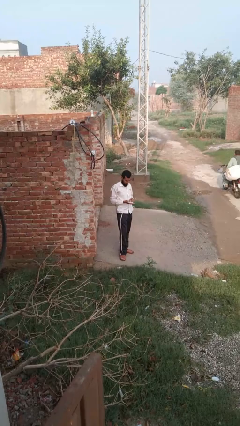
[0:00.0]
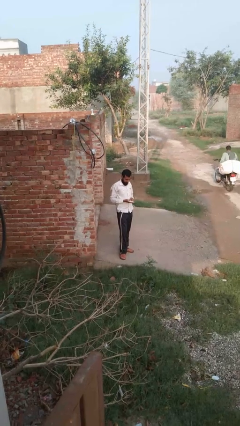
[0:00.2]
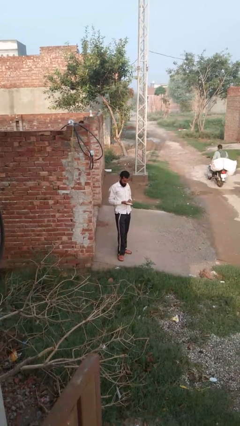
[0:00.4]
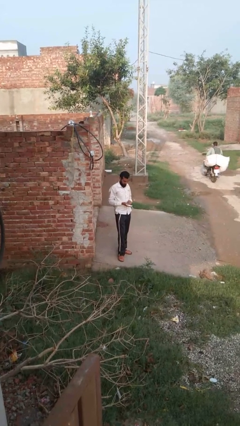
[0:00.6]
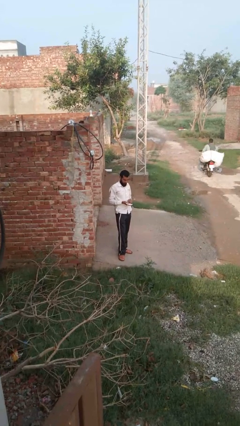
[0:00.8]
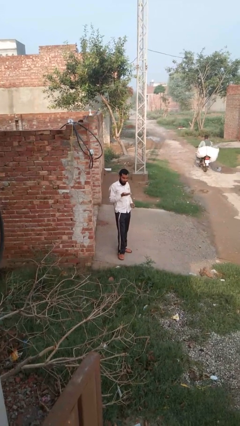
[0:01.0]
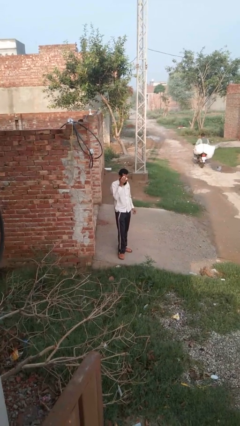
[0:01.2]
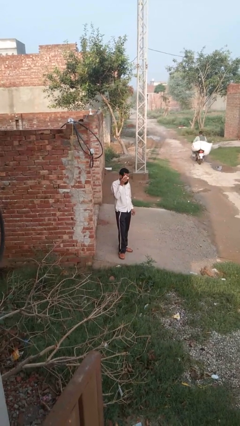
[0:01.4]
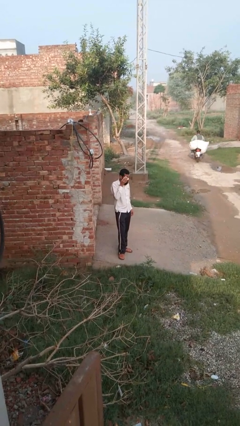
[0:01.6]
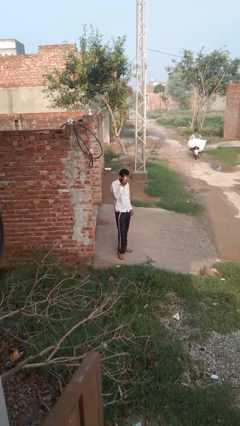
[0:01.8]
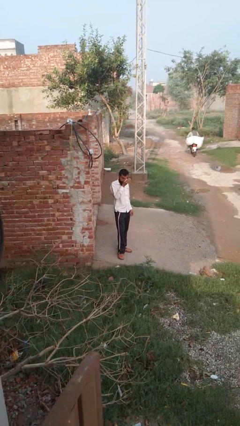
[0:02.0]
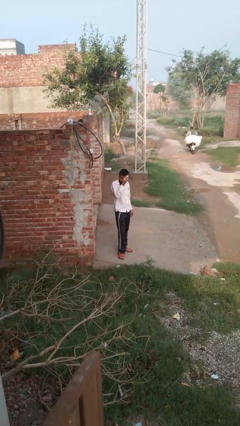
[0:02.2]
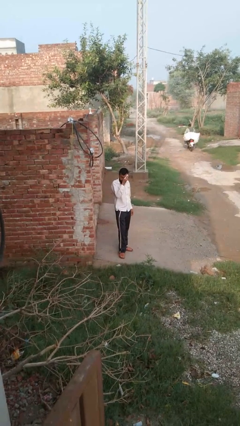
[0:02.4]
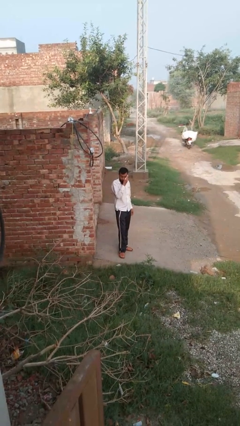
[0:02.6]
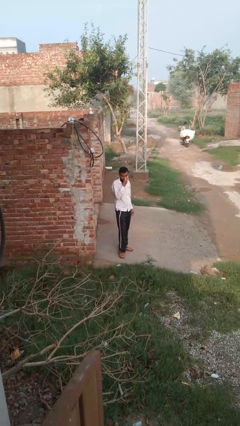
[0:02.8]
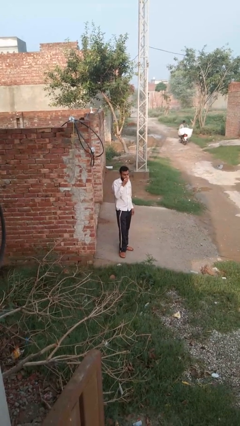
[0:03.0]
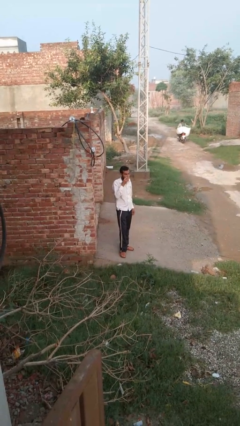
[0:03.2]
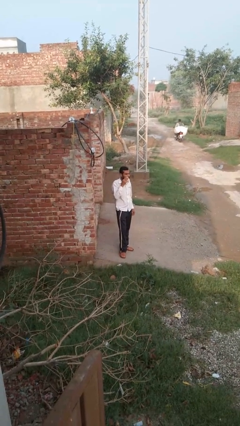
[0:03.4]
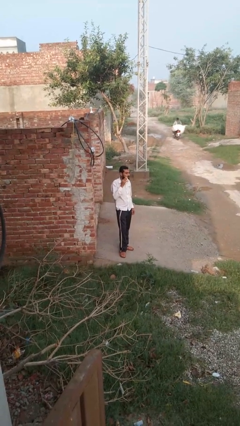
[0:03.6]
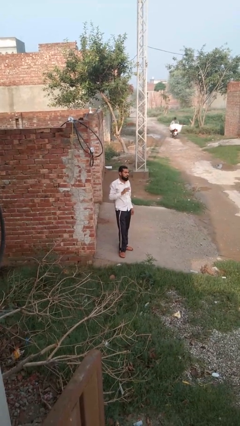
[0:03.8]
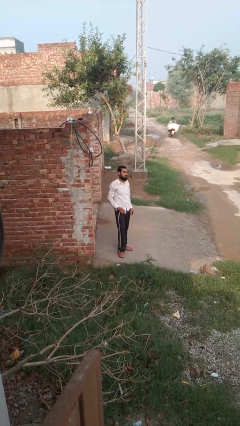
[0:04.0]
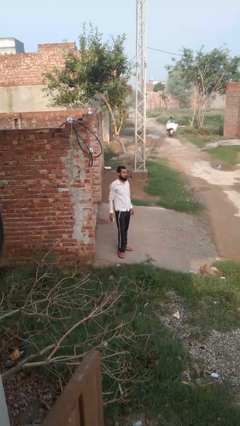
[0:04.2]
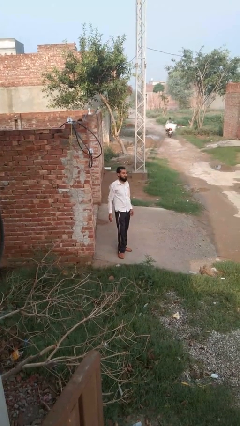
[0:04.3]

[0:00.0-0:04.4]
person wipes mouth with napkin

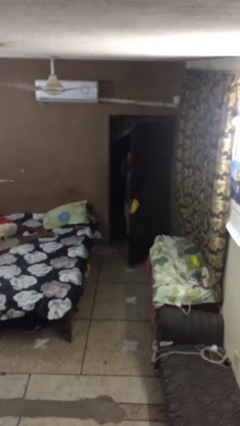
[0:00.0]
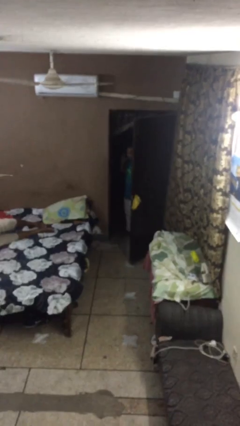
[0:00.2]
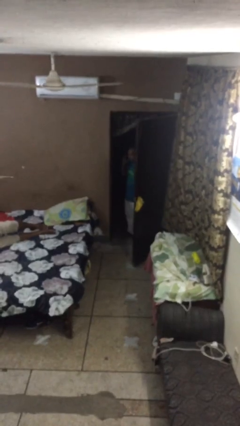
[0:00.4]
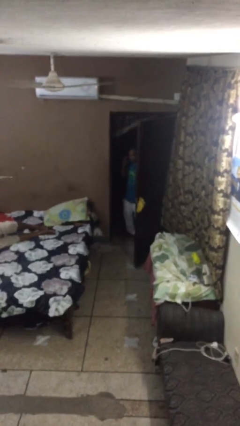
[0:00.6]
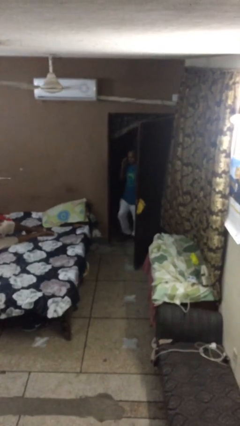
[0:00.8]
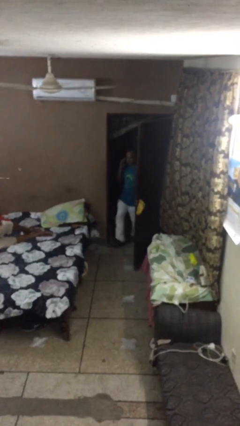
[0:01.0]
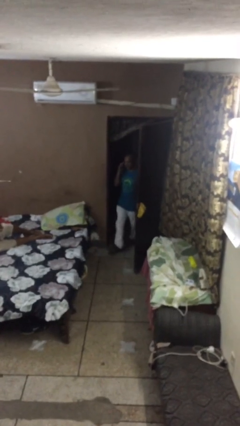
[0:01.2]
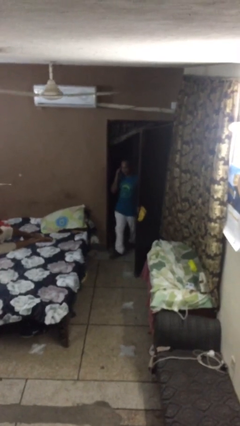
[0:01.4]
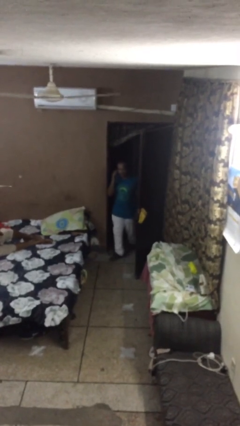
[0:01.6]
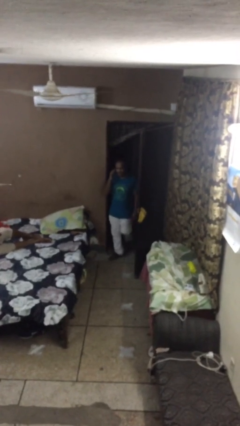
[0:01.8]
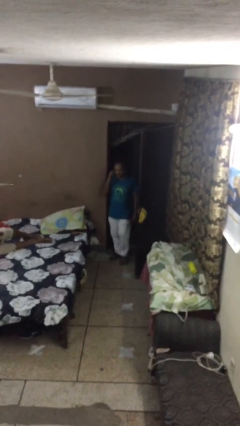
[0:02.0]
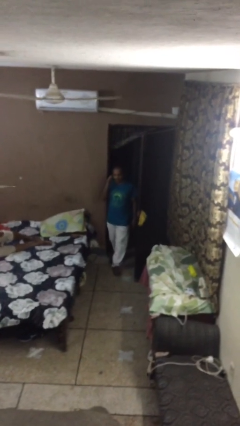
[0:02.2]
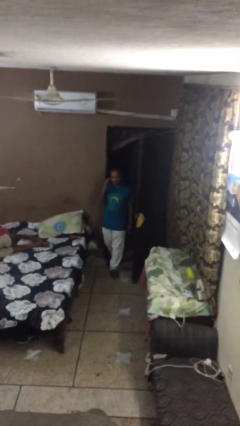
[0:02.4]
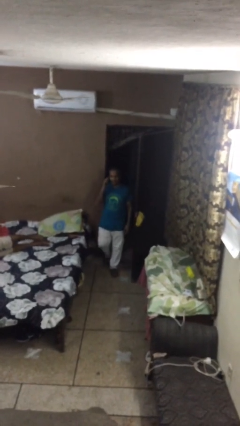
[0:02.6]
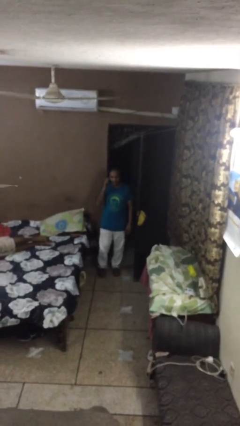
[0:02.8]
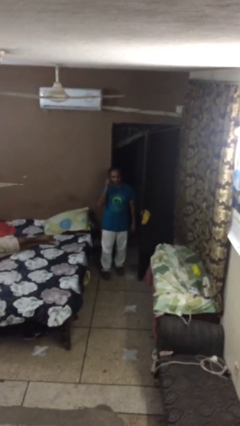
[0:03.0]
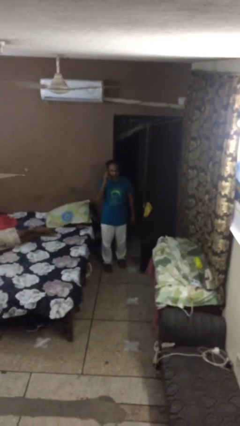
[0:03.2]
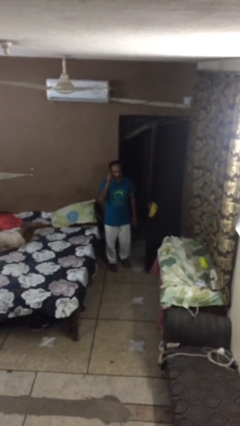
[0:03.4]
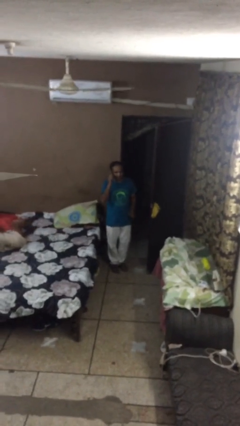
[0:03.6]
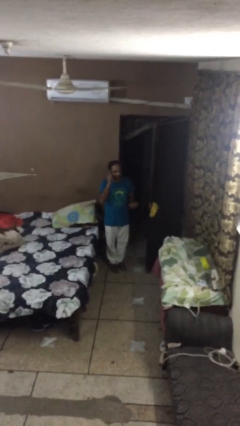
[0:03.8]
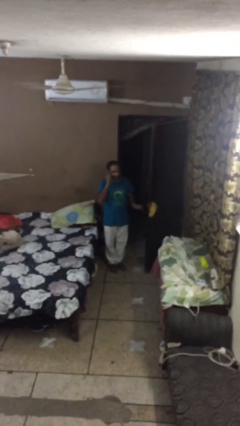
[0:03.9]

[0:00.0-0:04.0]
person enters scene through structure

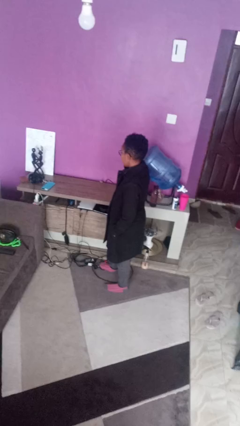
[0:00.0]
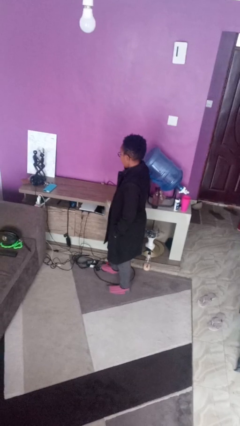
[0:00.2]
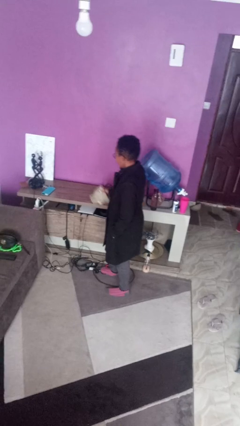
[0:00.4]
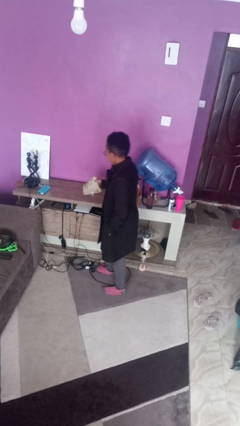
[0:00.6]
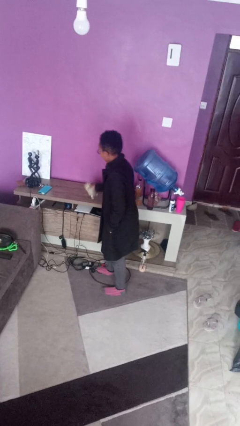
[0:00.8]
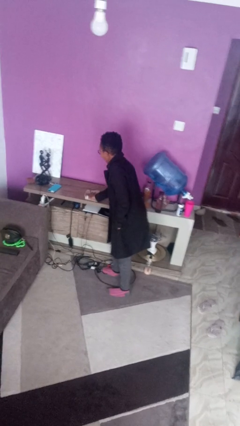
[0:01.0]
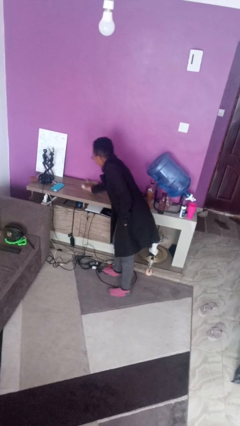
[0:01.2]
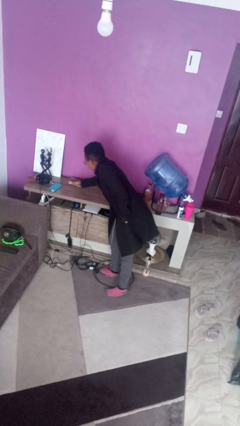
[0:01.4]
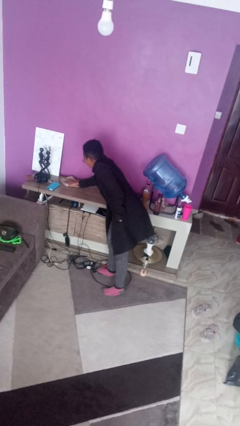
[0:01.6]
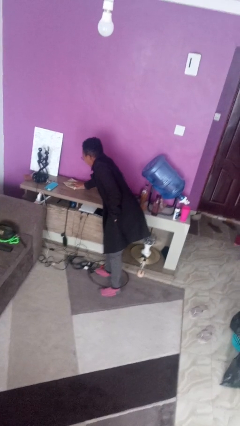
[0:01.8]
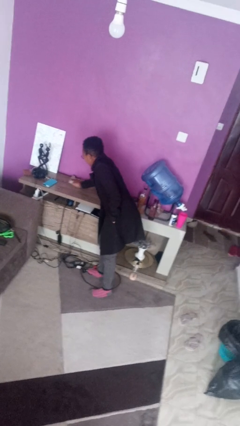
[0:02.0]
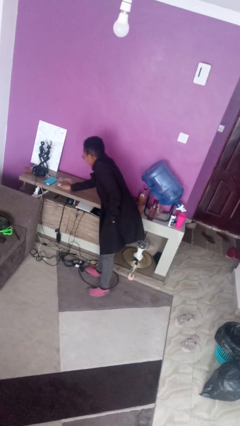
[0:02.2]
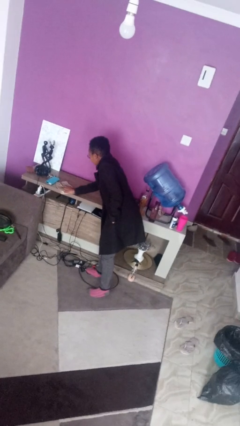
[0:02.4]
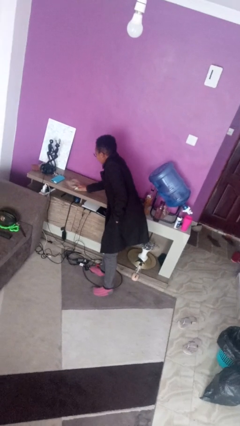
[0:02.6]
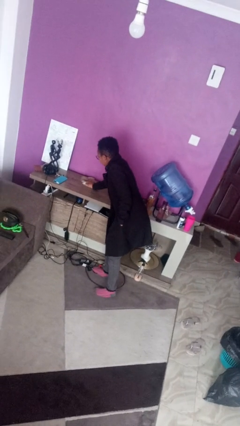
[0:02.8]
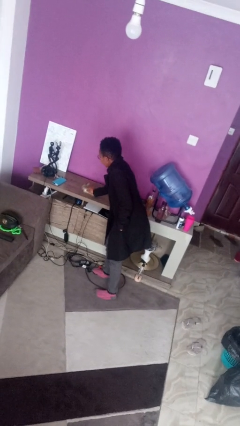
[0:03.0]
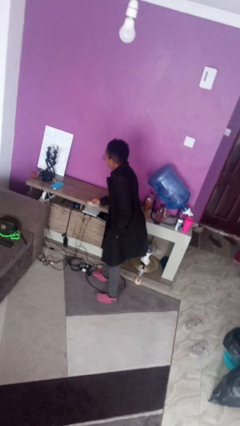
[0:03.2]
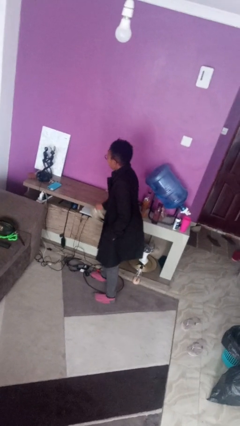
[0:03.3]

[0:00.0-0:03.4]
person cleans table with rag

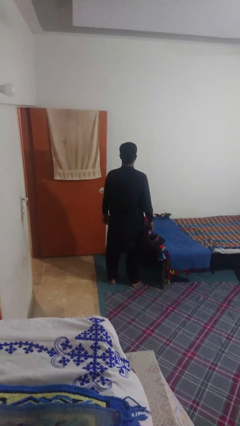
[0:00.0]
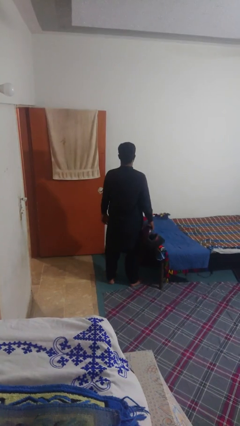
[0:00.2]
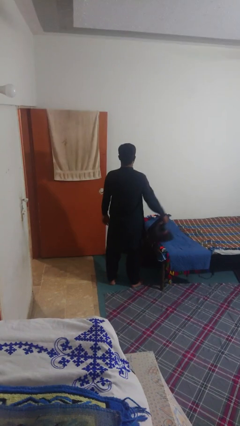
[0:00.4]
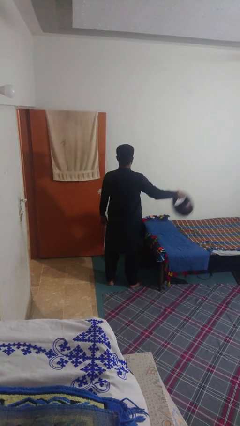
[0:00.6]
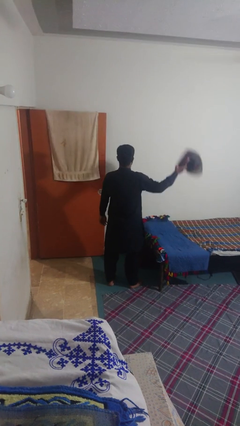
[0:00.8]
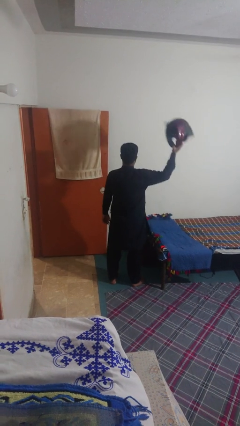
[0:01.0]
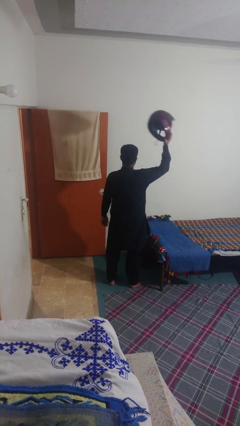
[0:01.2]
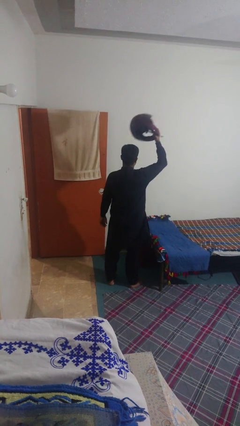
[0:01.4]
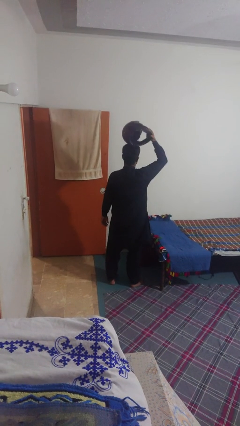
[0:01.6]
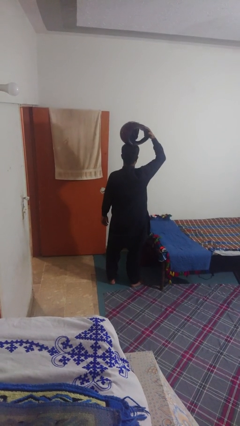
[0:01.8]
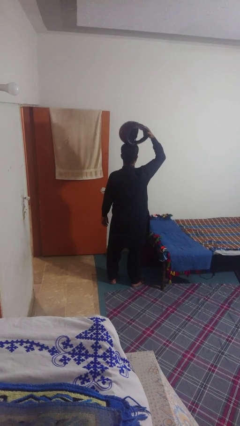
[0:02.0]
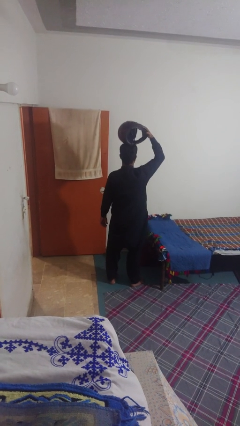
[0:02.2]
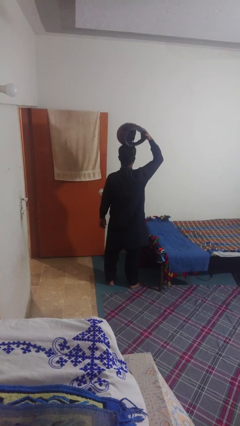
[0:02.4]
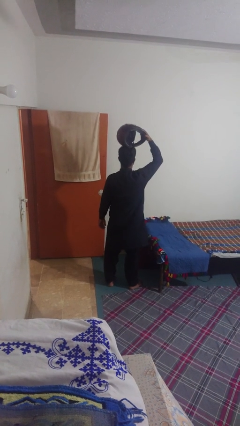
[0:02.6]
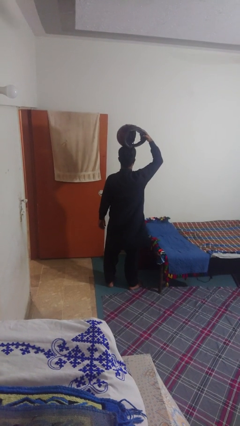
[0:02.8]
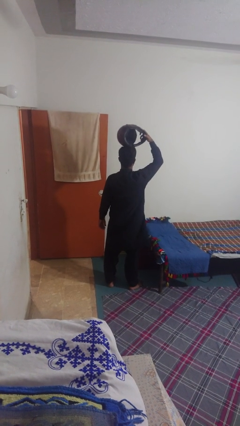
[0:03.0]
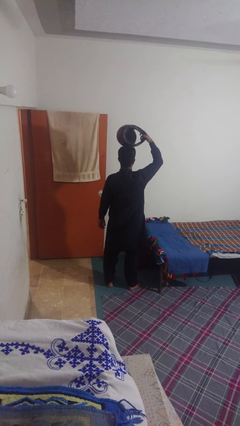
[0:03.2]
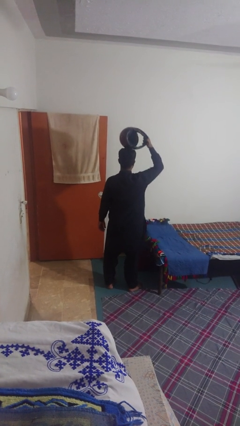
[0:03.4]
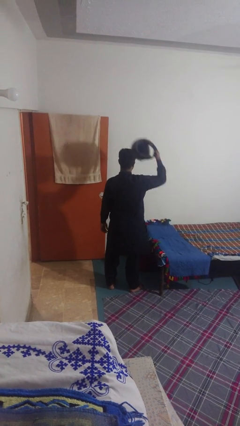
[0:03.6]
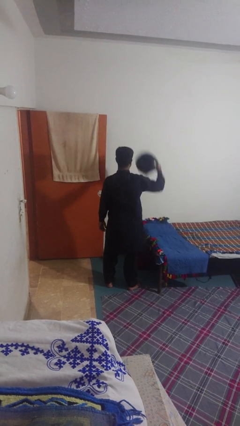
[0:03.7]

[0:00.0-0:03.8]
person holds object above head

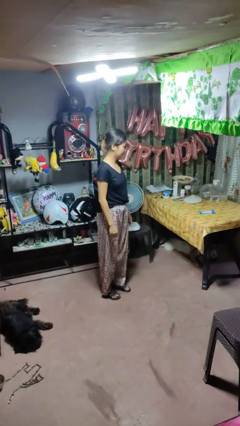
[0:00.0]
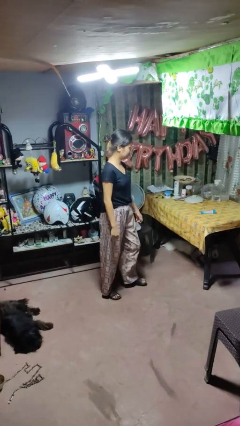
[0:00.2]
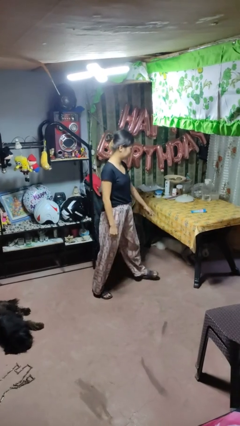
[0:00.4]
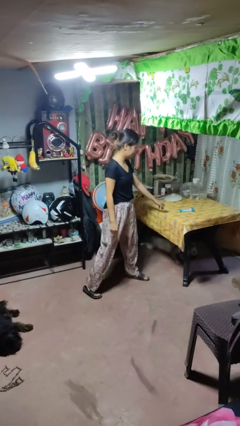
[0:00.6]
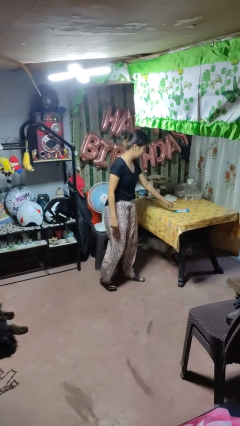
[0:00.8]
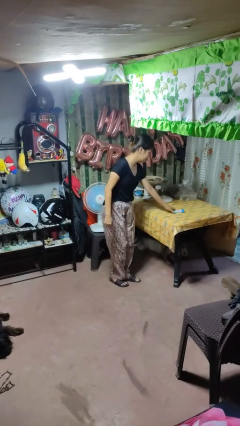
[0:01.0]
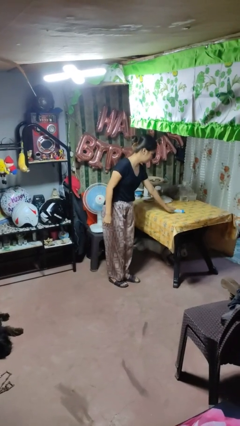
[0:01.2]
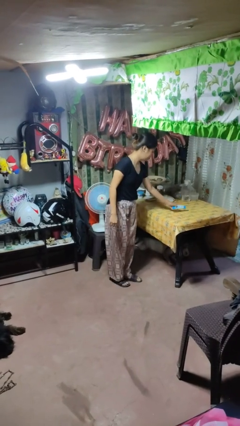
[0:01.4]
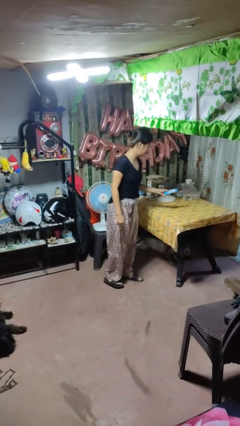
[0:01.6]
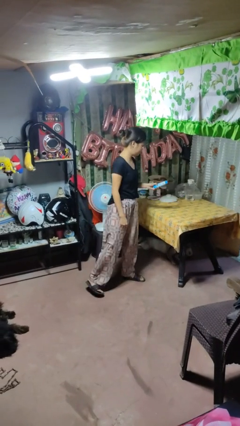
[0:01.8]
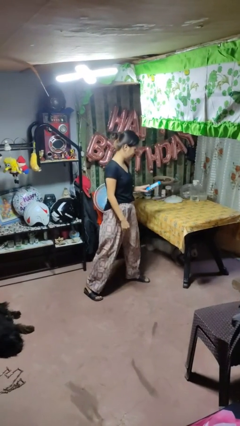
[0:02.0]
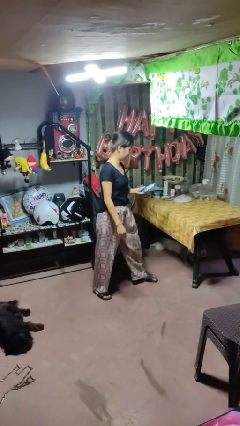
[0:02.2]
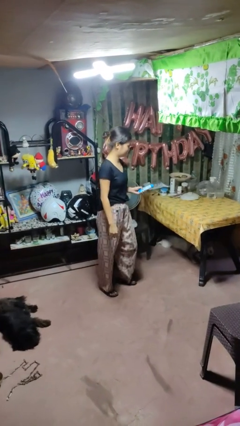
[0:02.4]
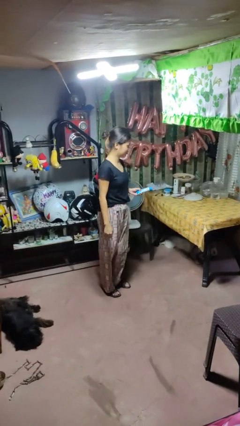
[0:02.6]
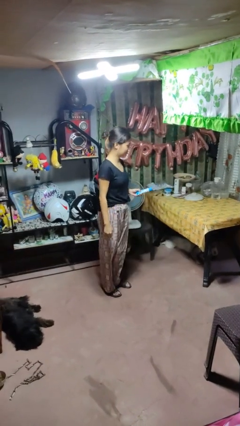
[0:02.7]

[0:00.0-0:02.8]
person picks up object from table
